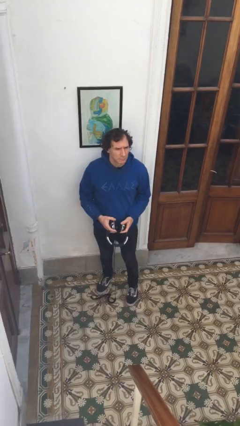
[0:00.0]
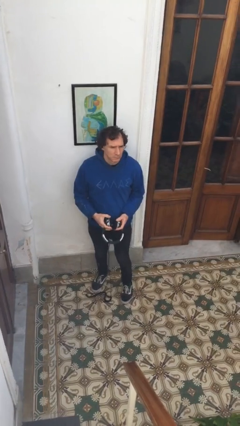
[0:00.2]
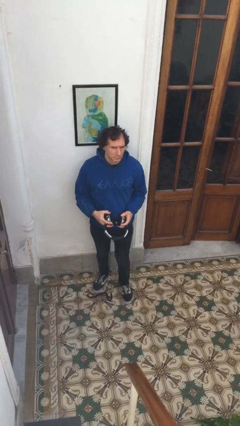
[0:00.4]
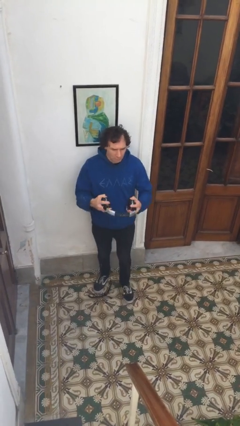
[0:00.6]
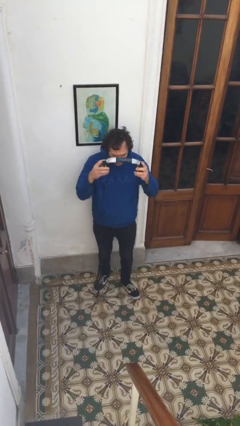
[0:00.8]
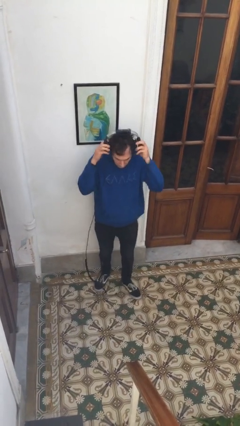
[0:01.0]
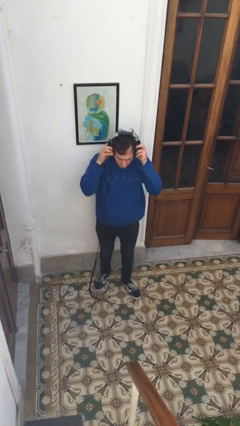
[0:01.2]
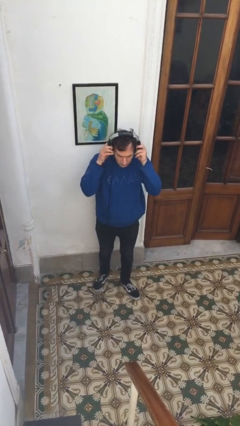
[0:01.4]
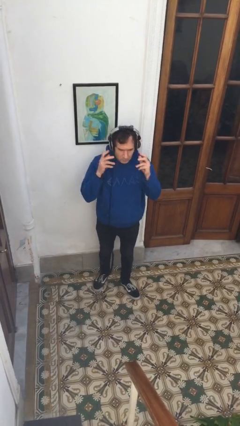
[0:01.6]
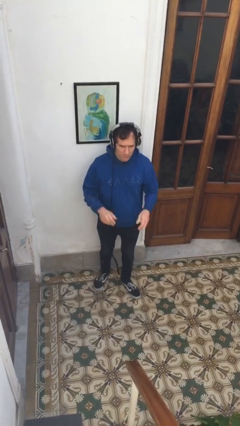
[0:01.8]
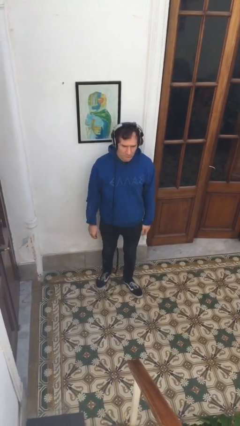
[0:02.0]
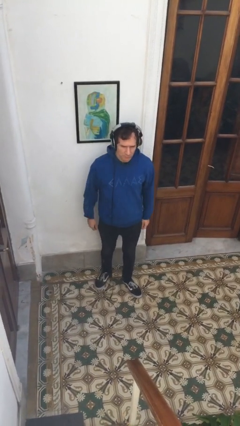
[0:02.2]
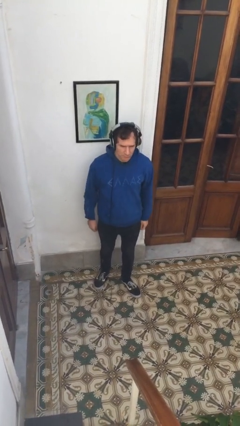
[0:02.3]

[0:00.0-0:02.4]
person puts on headphones

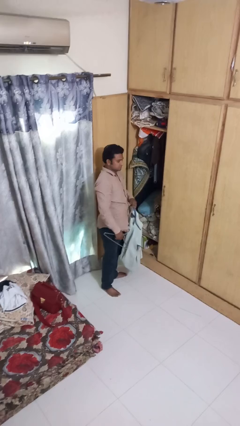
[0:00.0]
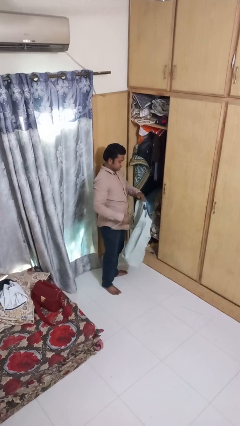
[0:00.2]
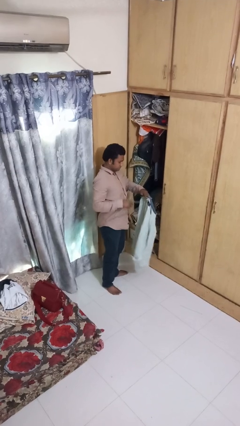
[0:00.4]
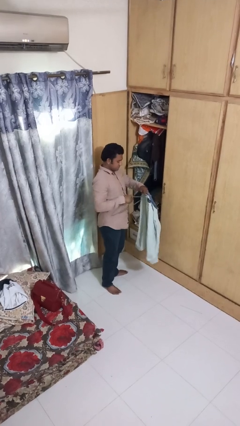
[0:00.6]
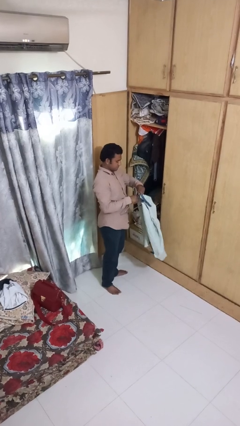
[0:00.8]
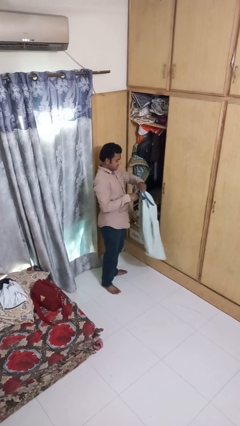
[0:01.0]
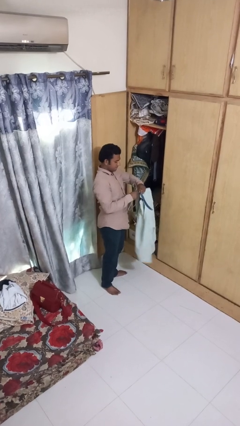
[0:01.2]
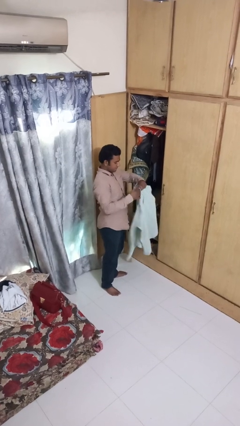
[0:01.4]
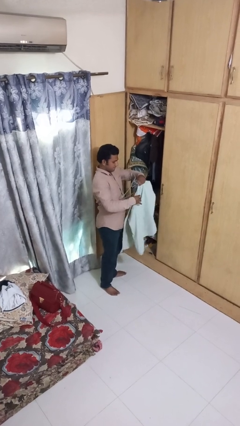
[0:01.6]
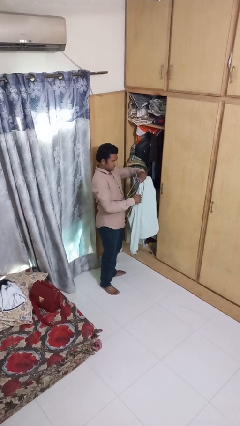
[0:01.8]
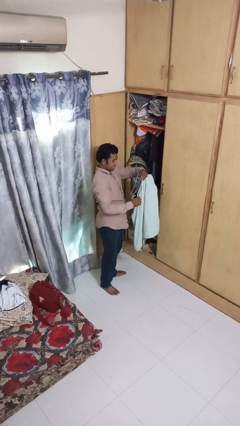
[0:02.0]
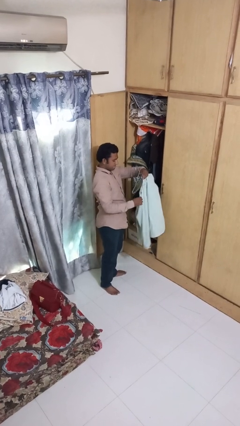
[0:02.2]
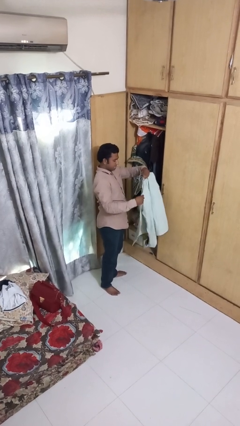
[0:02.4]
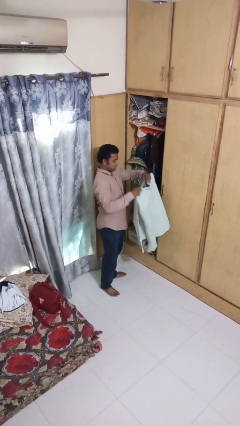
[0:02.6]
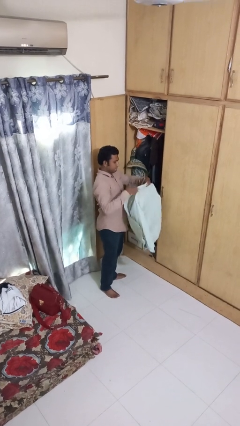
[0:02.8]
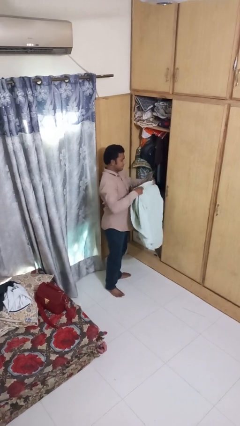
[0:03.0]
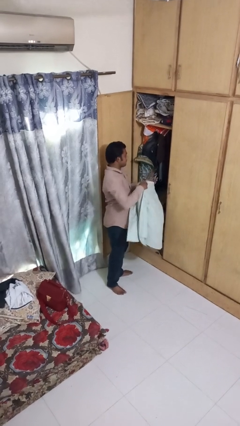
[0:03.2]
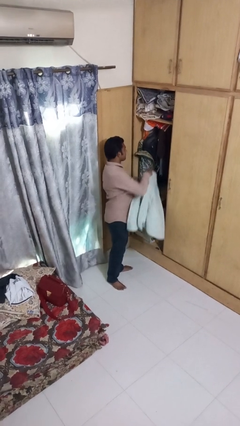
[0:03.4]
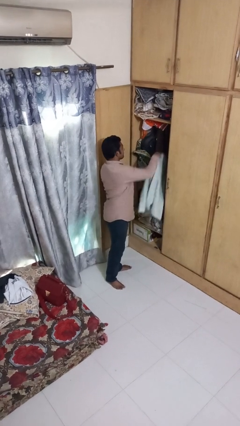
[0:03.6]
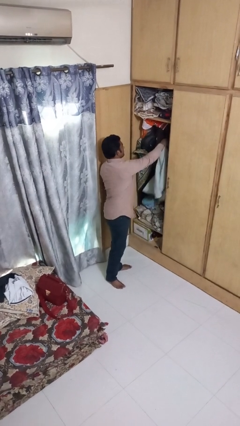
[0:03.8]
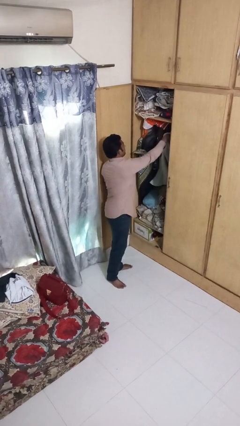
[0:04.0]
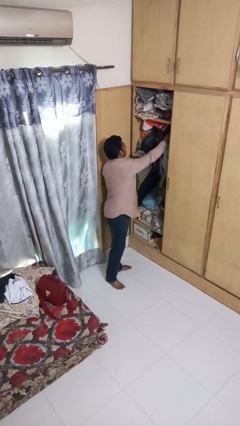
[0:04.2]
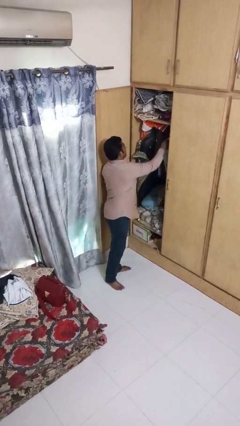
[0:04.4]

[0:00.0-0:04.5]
person puts clothes into closet

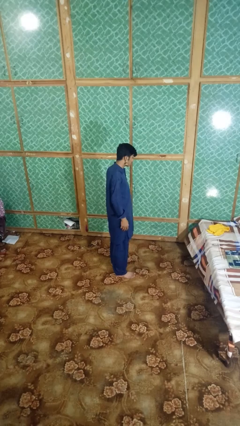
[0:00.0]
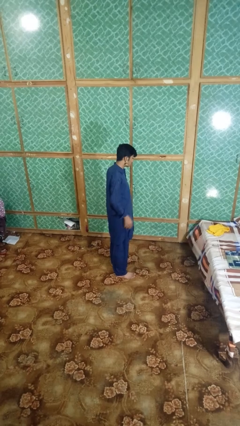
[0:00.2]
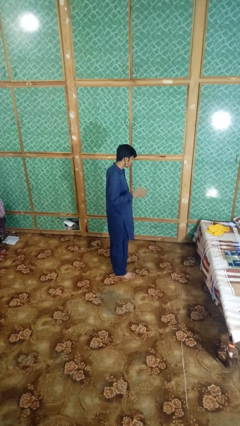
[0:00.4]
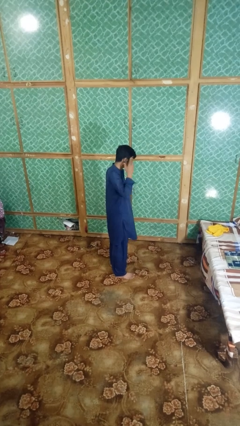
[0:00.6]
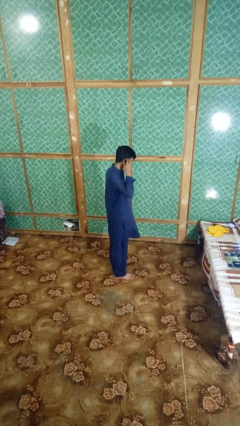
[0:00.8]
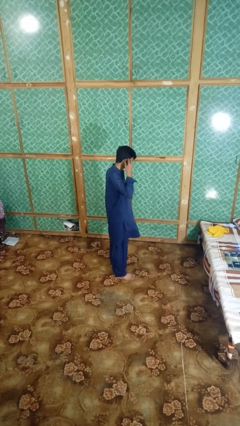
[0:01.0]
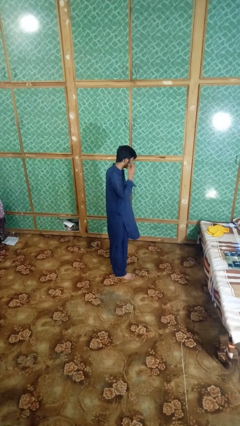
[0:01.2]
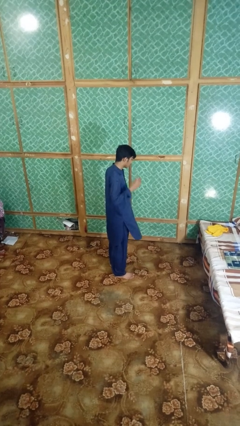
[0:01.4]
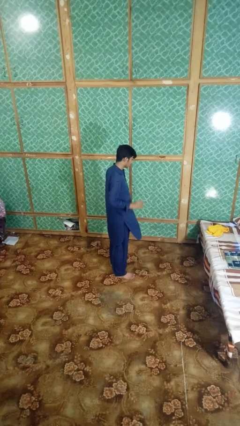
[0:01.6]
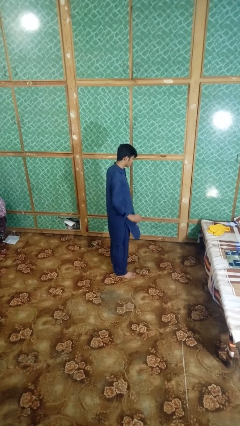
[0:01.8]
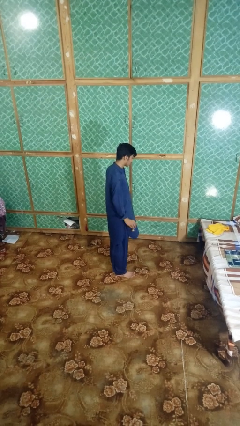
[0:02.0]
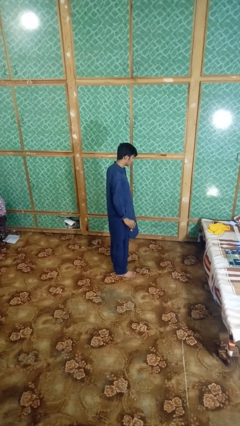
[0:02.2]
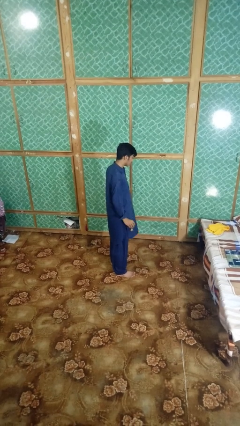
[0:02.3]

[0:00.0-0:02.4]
person takes off earrings

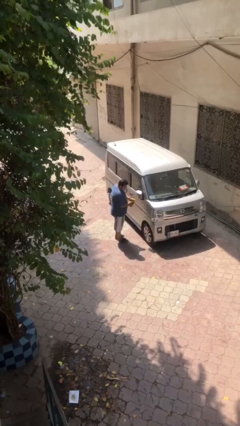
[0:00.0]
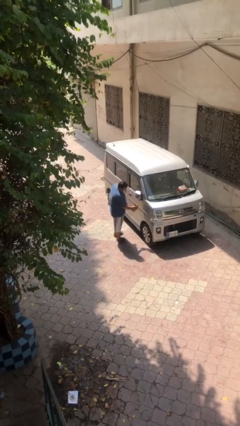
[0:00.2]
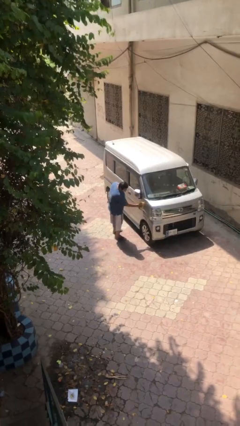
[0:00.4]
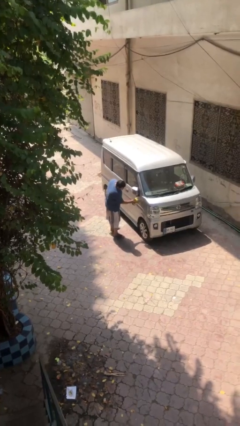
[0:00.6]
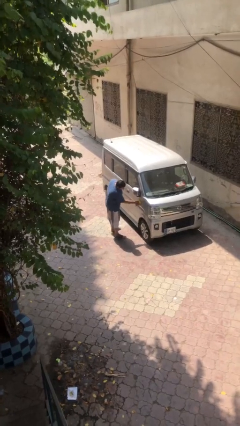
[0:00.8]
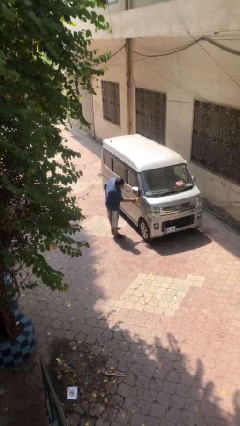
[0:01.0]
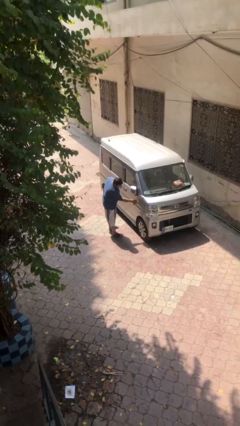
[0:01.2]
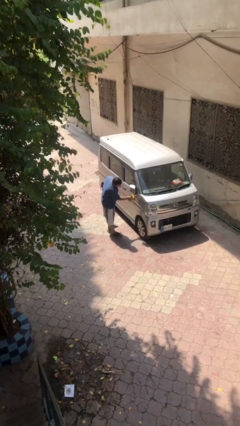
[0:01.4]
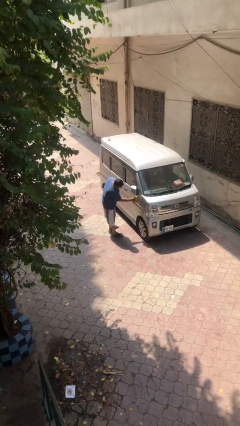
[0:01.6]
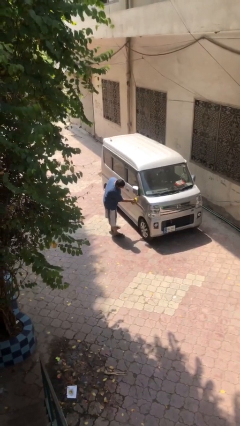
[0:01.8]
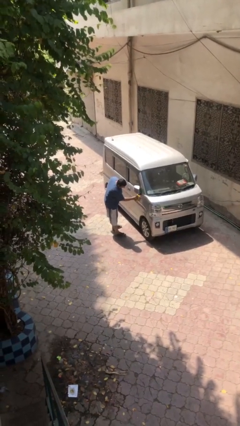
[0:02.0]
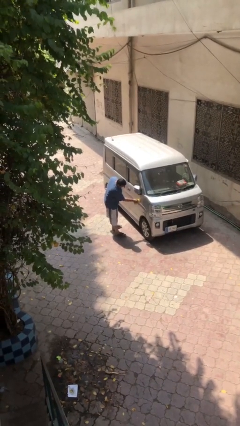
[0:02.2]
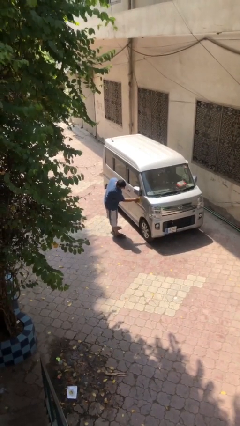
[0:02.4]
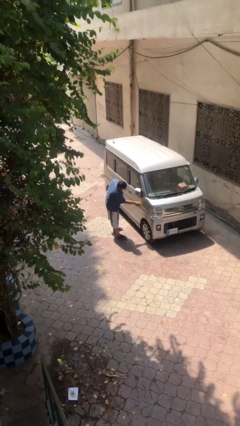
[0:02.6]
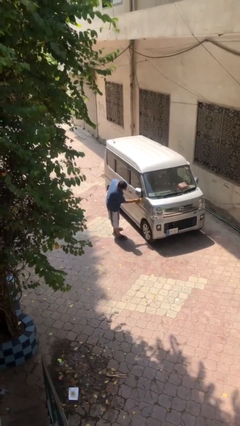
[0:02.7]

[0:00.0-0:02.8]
person polishes car with rag

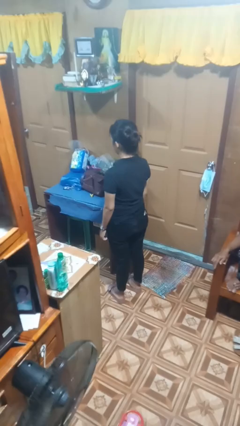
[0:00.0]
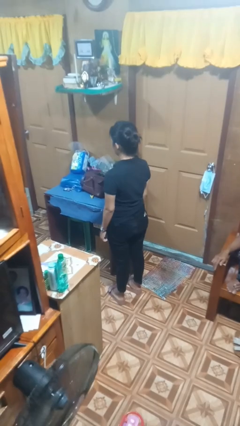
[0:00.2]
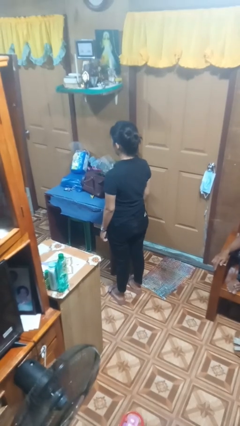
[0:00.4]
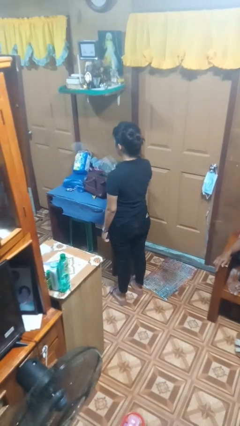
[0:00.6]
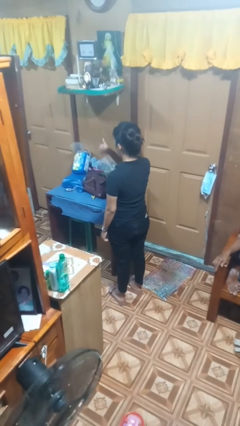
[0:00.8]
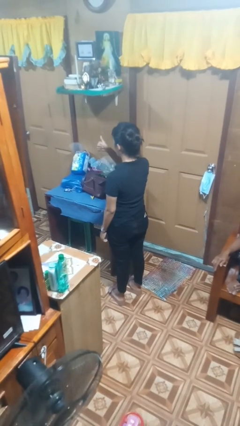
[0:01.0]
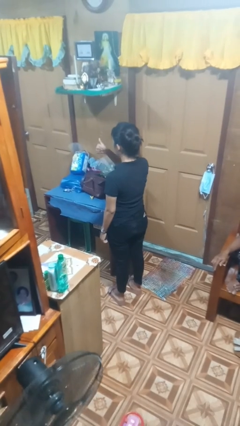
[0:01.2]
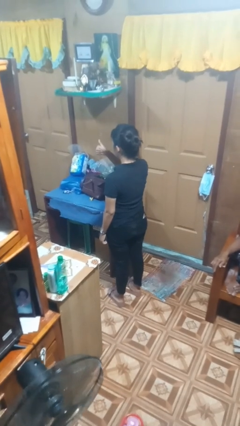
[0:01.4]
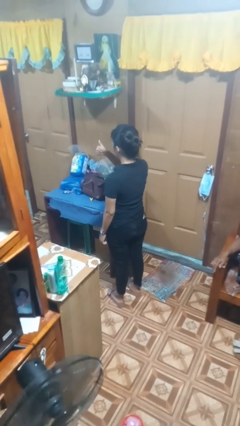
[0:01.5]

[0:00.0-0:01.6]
person gestures thumbs up

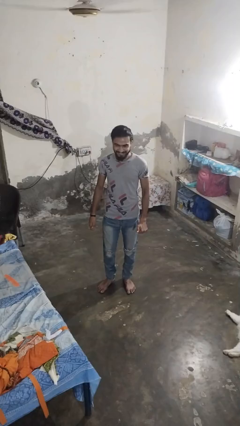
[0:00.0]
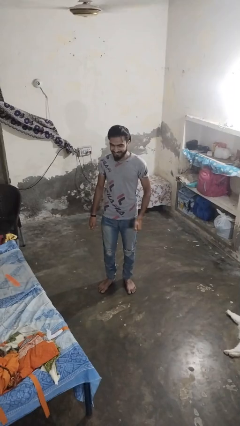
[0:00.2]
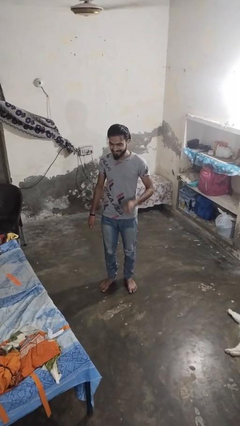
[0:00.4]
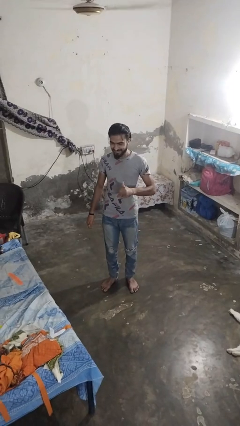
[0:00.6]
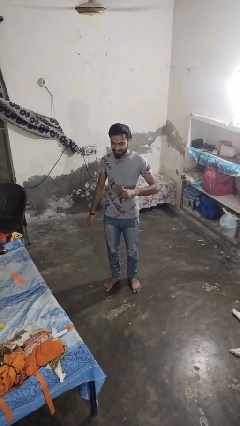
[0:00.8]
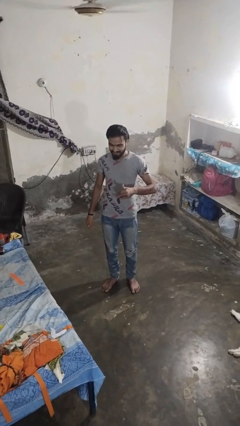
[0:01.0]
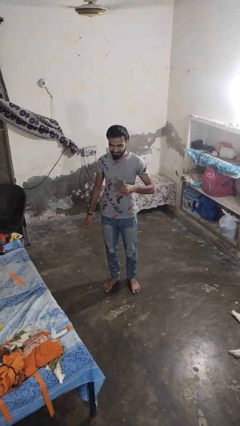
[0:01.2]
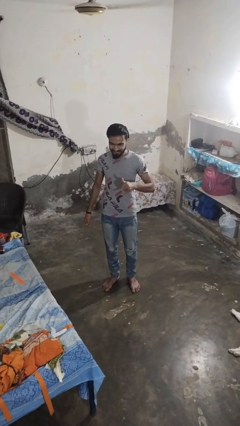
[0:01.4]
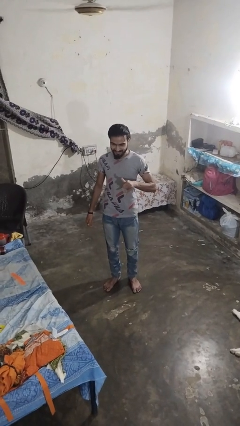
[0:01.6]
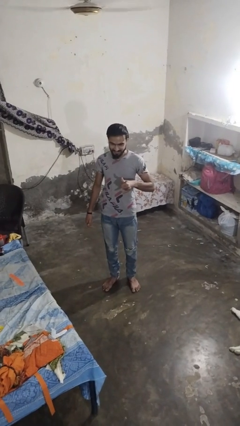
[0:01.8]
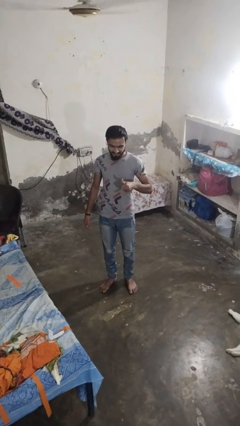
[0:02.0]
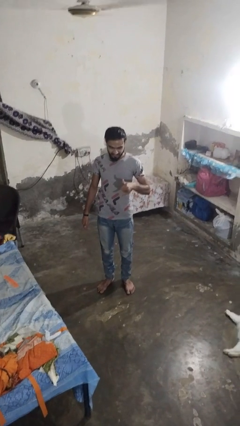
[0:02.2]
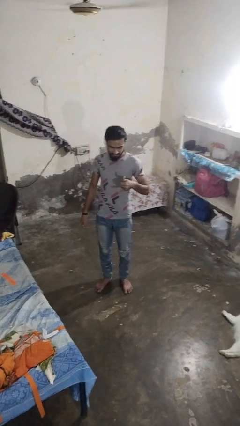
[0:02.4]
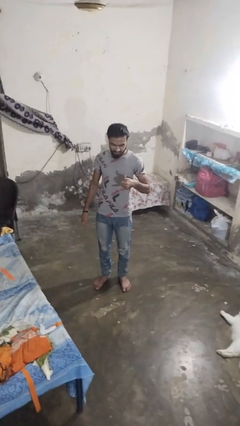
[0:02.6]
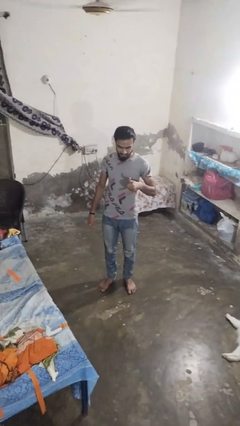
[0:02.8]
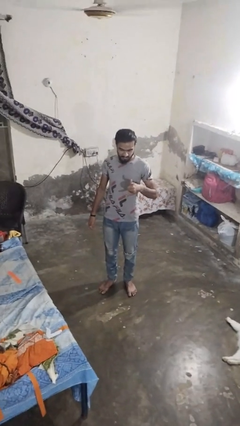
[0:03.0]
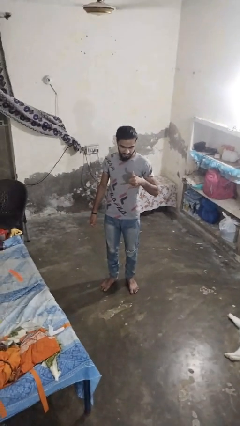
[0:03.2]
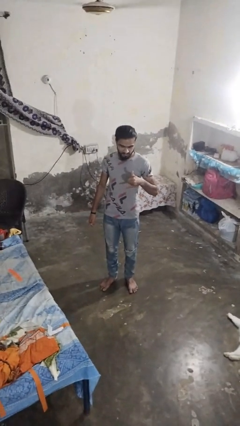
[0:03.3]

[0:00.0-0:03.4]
person gestures hang loose

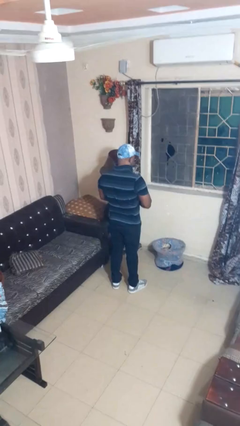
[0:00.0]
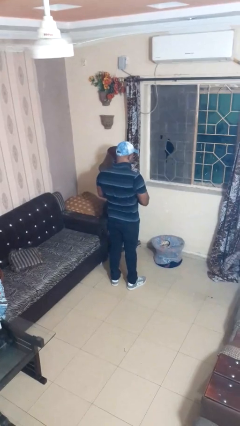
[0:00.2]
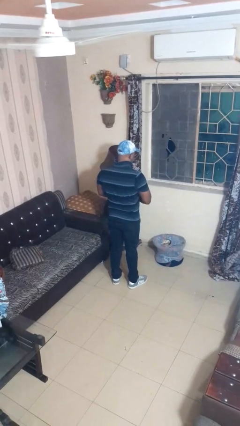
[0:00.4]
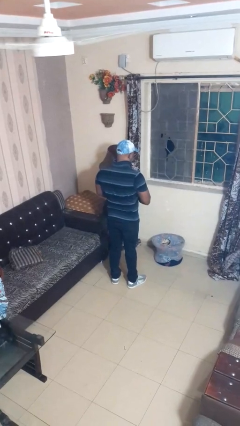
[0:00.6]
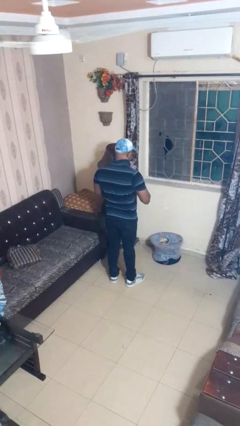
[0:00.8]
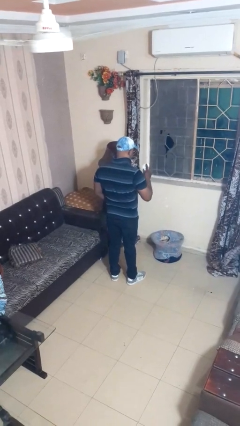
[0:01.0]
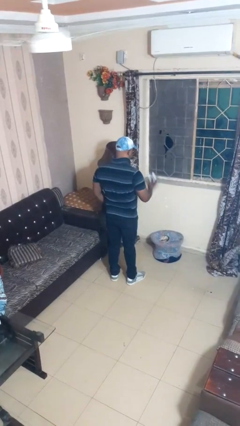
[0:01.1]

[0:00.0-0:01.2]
person puts object into basket
